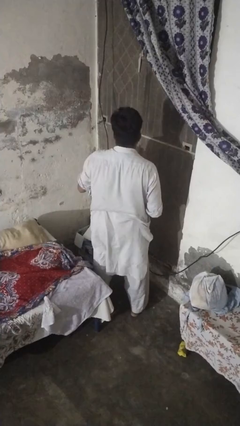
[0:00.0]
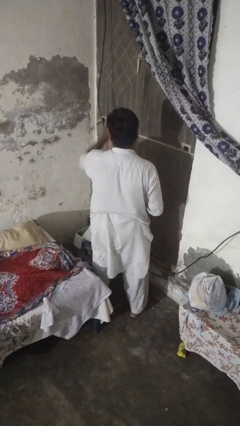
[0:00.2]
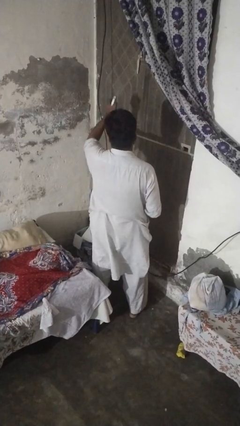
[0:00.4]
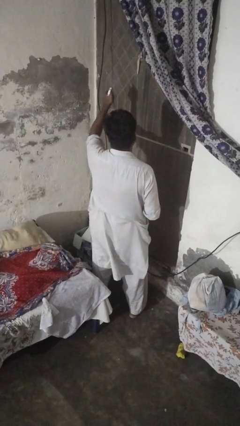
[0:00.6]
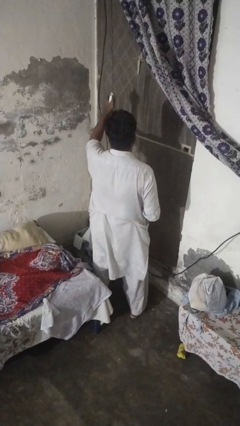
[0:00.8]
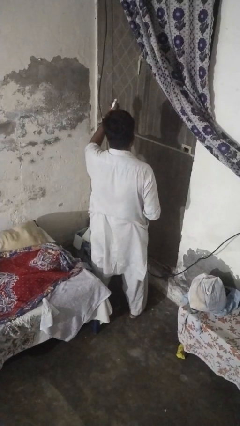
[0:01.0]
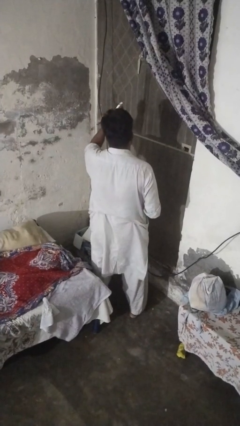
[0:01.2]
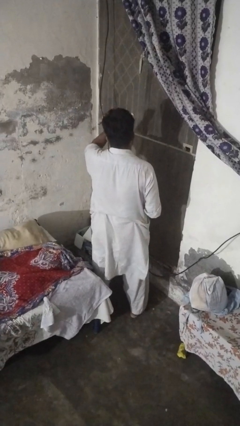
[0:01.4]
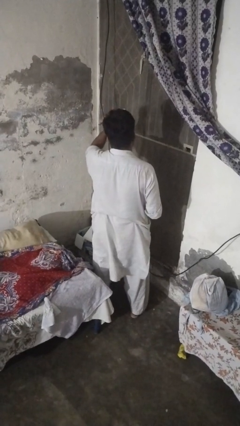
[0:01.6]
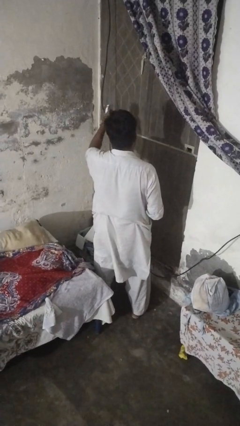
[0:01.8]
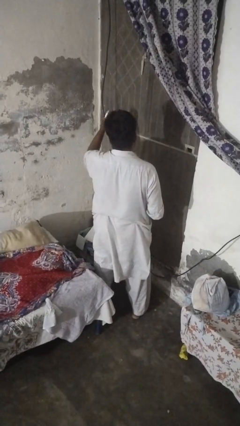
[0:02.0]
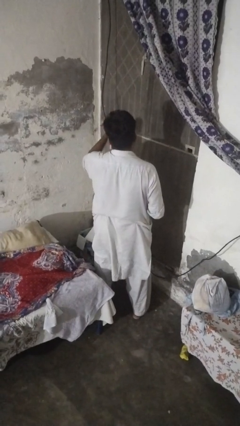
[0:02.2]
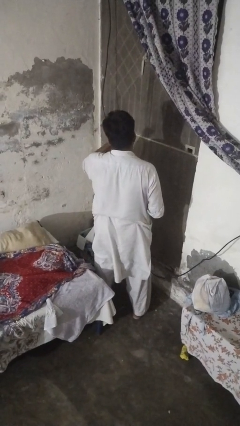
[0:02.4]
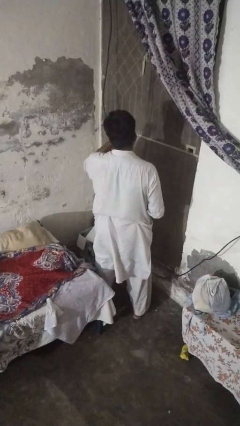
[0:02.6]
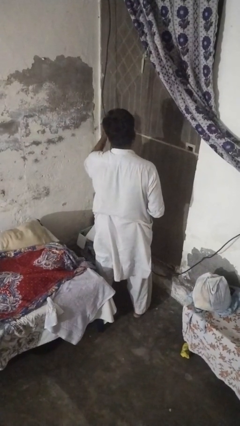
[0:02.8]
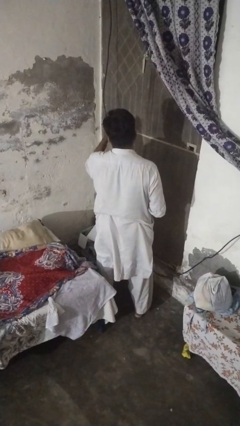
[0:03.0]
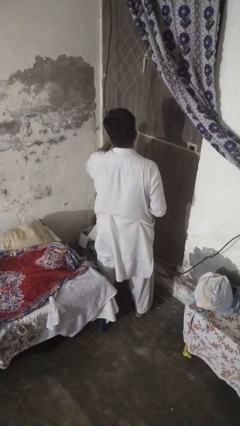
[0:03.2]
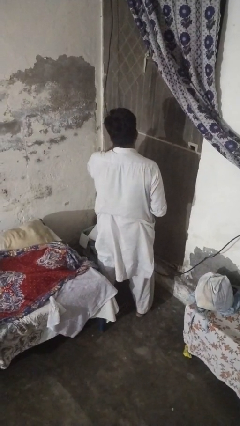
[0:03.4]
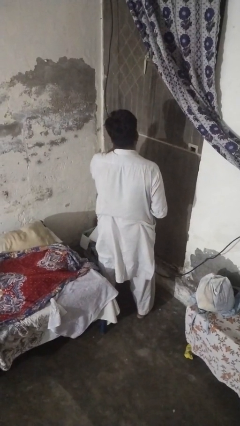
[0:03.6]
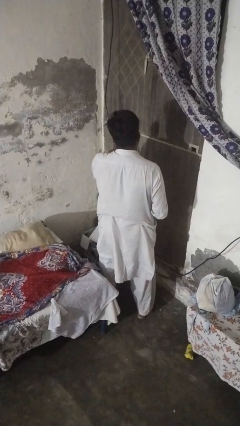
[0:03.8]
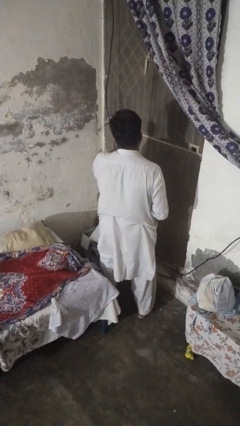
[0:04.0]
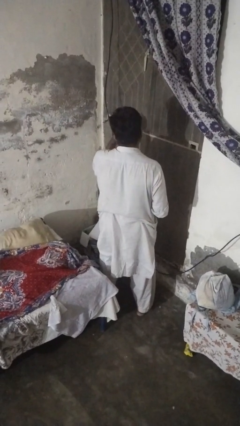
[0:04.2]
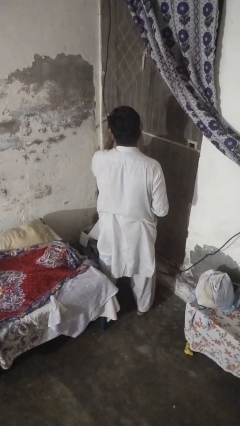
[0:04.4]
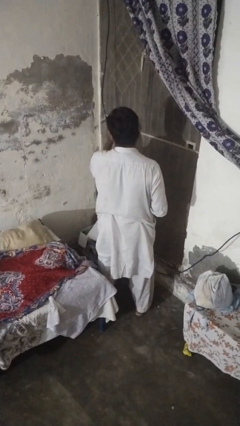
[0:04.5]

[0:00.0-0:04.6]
person sprays from bottle

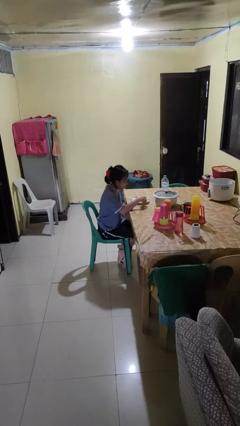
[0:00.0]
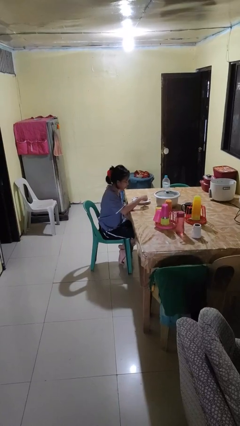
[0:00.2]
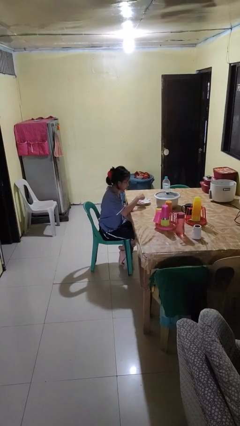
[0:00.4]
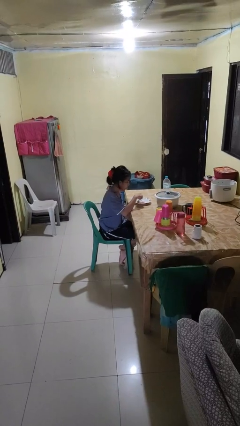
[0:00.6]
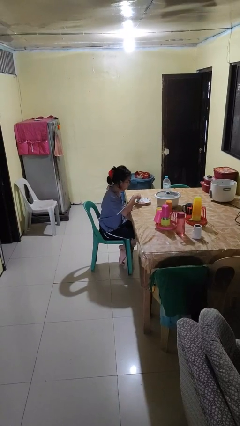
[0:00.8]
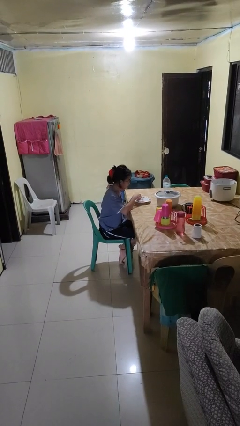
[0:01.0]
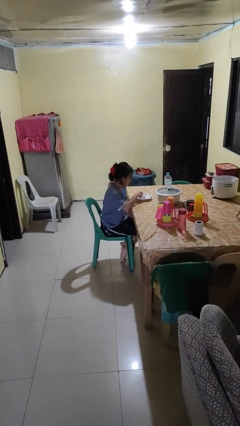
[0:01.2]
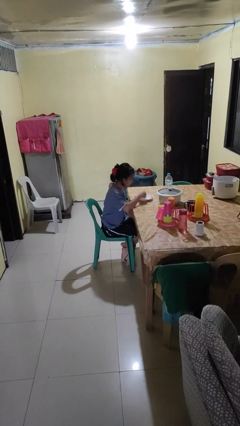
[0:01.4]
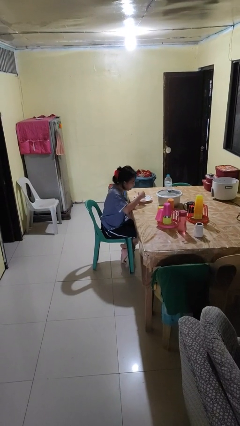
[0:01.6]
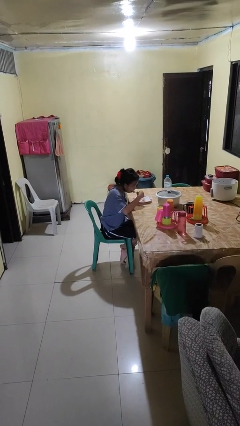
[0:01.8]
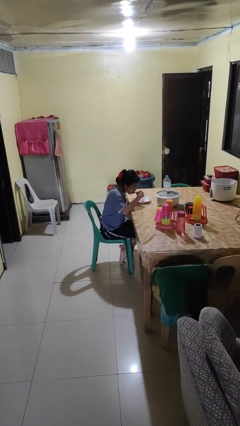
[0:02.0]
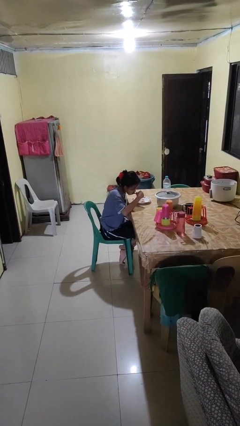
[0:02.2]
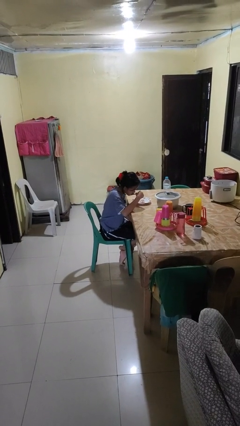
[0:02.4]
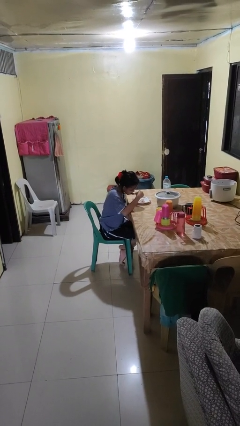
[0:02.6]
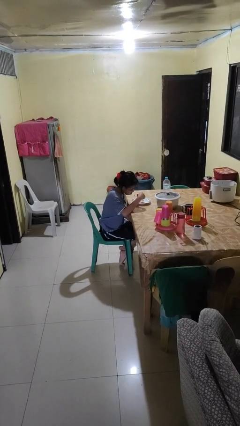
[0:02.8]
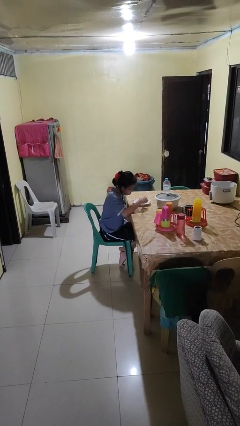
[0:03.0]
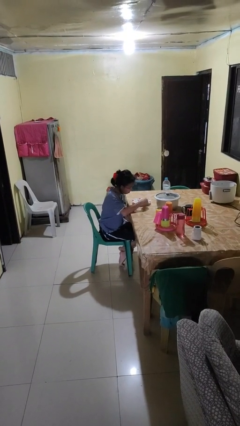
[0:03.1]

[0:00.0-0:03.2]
person eats with utensil

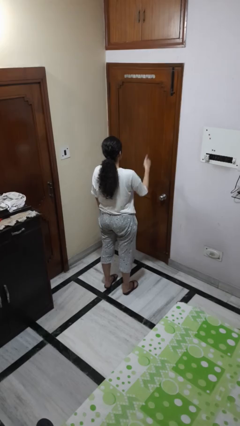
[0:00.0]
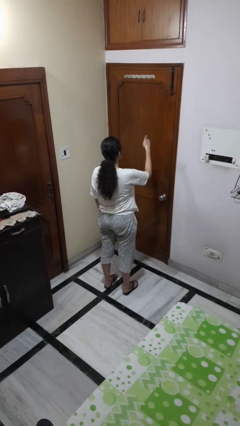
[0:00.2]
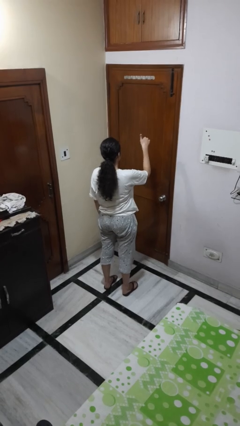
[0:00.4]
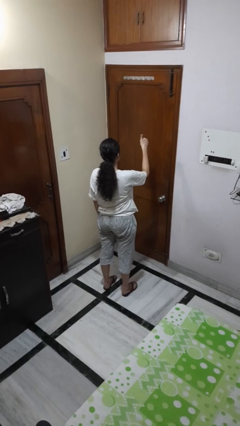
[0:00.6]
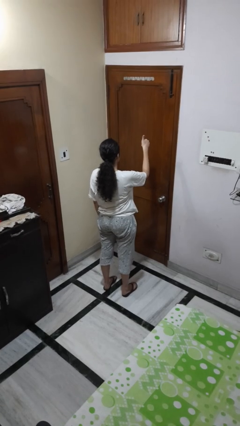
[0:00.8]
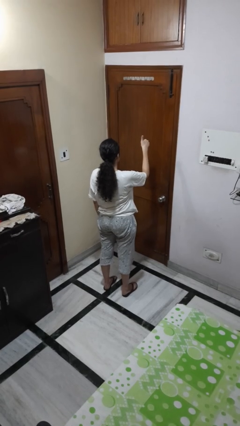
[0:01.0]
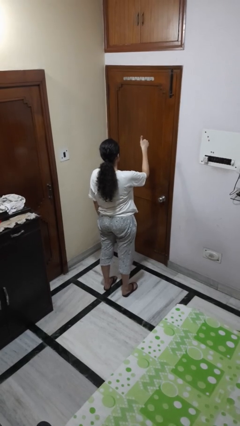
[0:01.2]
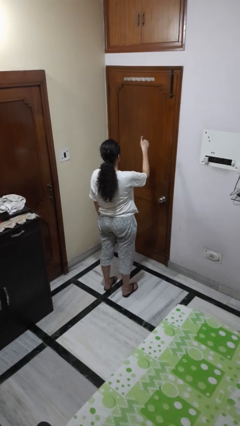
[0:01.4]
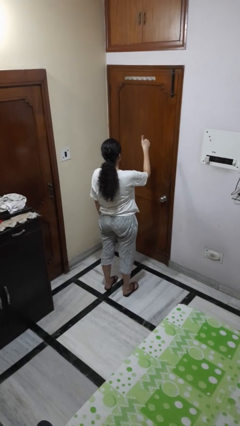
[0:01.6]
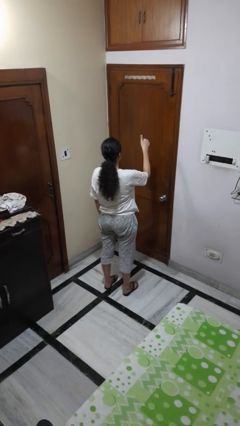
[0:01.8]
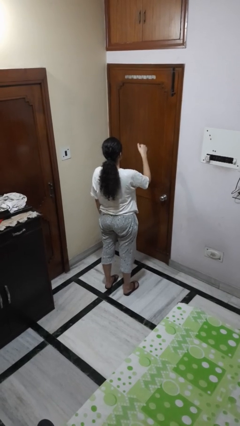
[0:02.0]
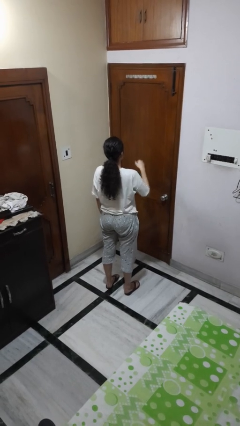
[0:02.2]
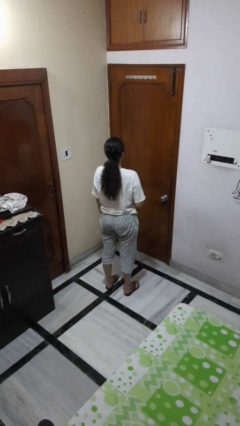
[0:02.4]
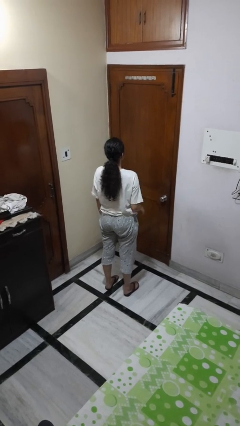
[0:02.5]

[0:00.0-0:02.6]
person gestures hang loose

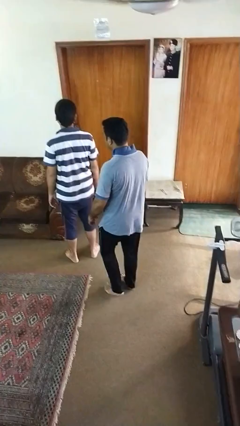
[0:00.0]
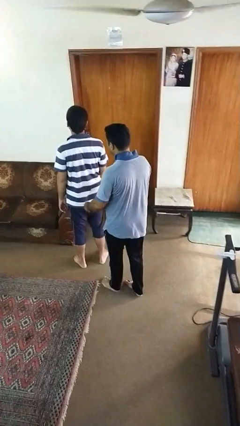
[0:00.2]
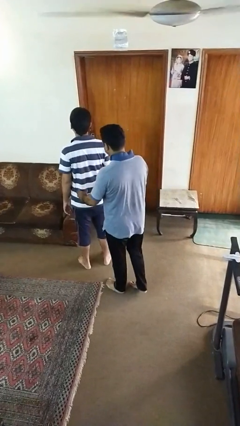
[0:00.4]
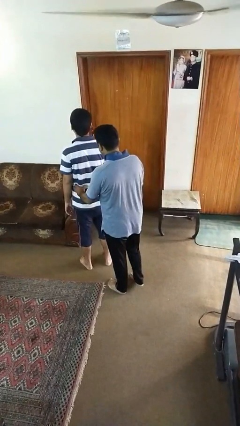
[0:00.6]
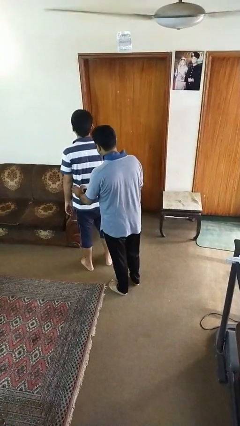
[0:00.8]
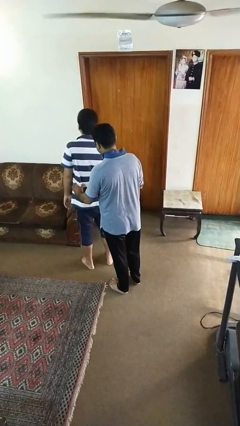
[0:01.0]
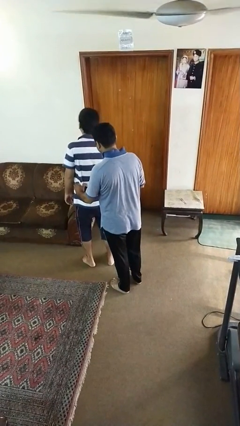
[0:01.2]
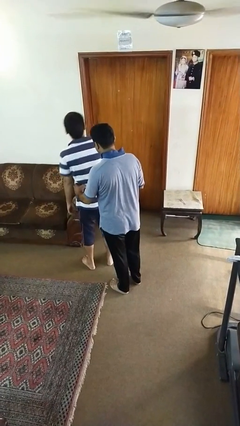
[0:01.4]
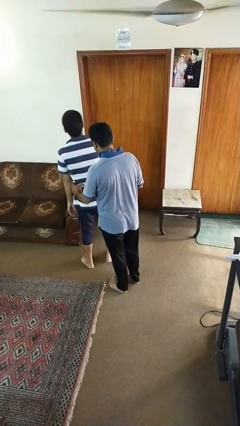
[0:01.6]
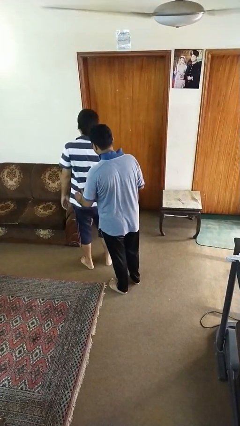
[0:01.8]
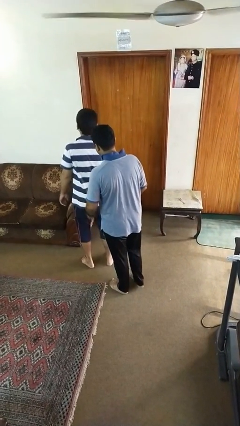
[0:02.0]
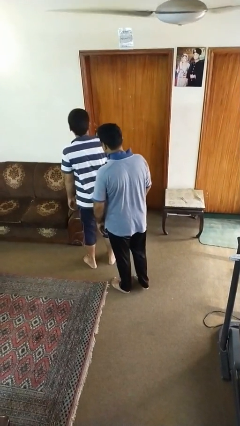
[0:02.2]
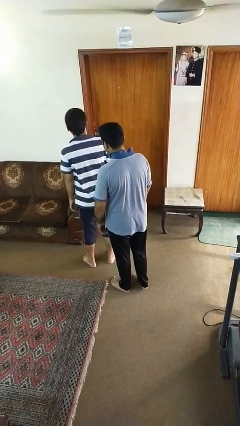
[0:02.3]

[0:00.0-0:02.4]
person tickles person

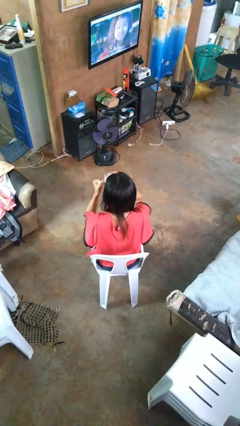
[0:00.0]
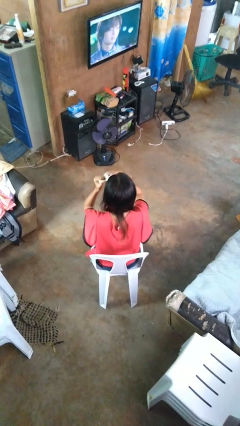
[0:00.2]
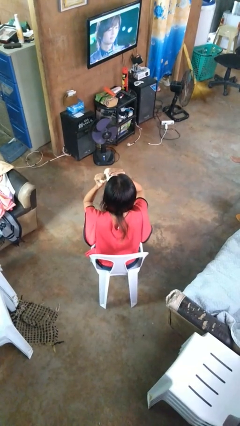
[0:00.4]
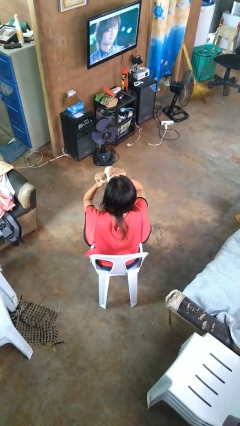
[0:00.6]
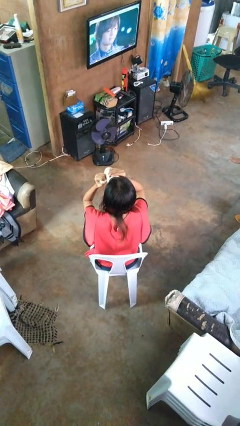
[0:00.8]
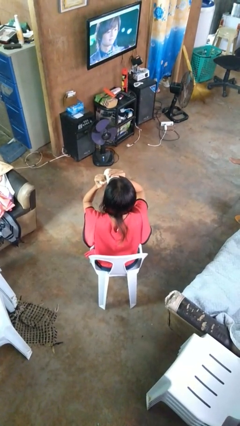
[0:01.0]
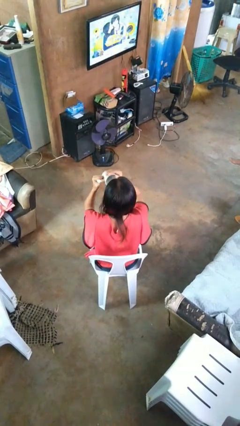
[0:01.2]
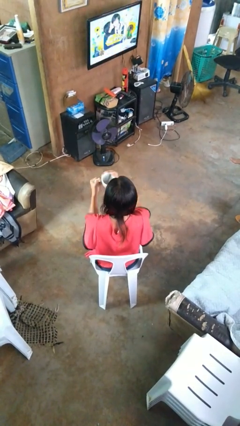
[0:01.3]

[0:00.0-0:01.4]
person drinks from mug

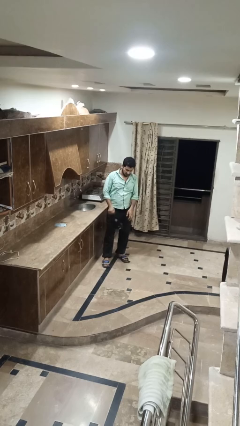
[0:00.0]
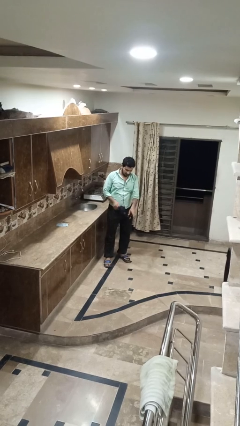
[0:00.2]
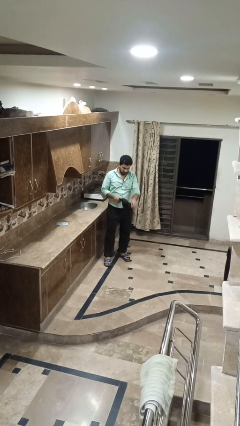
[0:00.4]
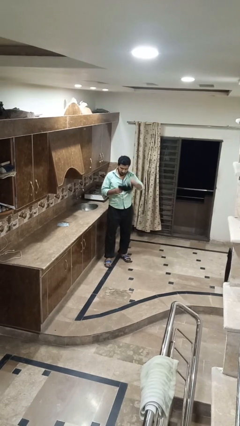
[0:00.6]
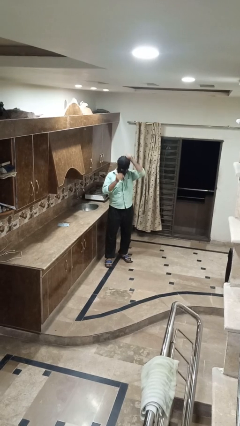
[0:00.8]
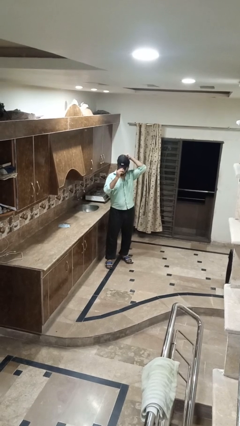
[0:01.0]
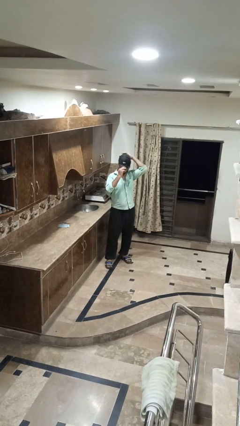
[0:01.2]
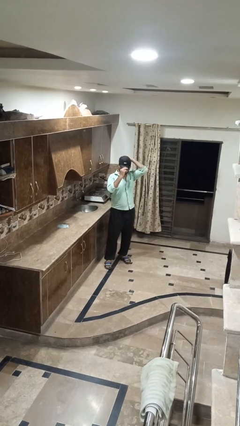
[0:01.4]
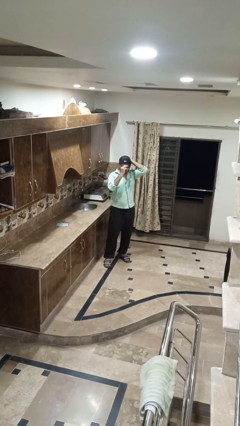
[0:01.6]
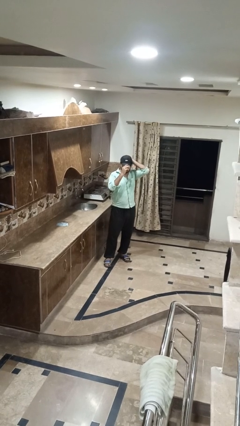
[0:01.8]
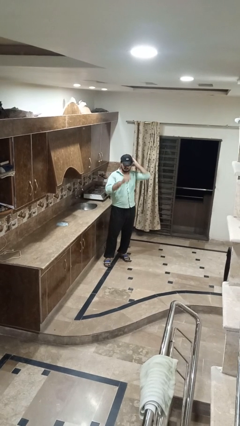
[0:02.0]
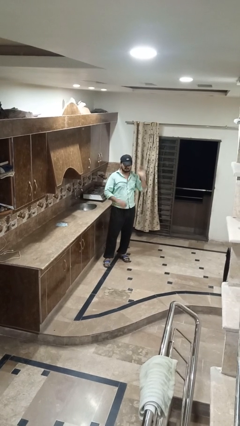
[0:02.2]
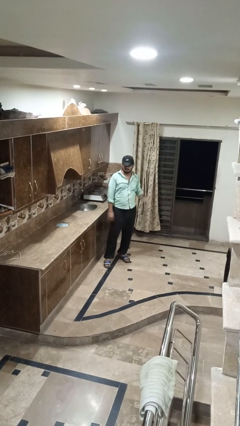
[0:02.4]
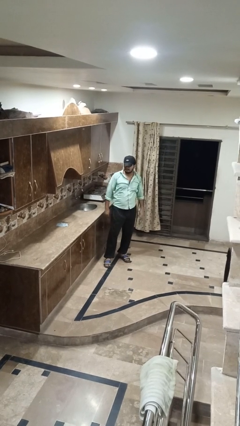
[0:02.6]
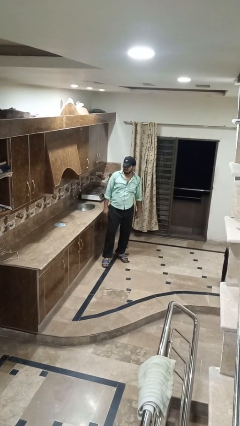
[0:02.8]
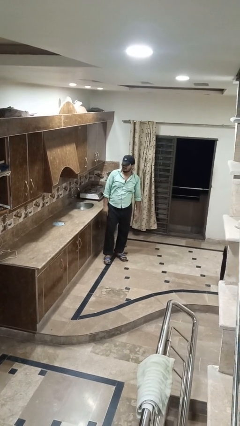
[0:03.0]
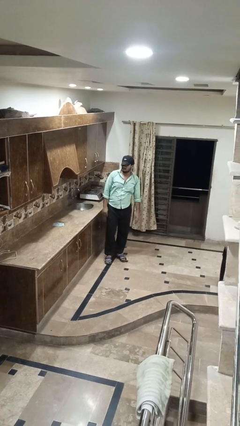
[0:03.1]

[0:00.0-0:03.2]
person puts on hat
